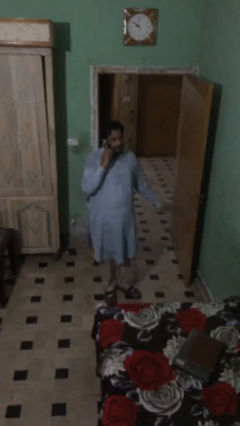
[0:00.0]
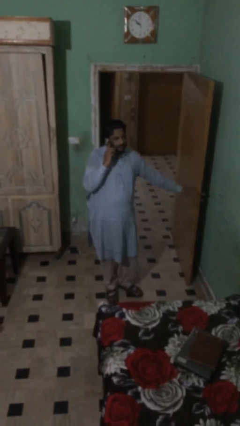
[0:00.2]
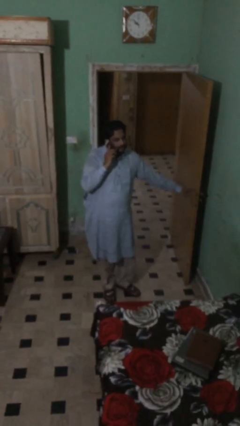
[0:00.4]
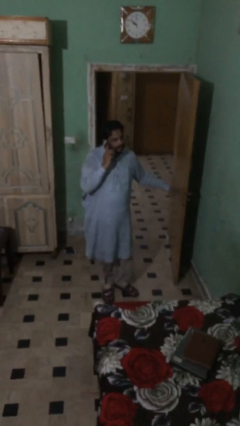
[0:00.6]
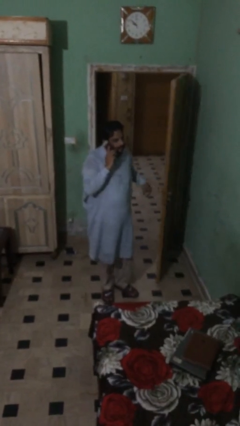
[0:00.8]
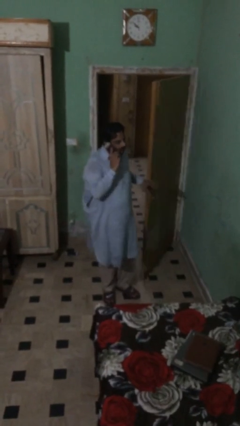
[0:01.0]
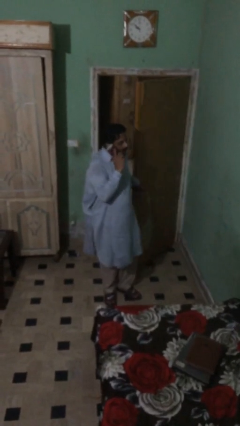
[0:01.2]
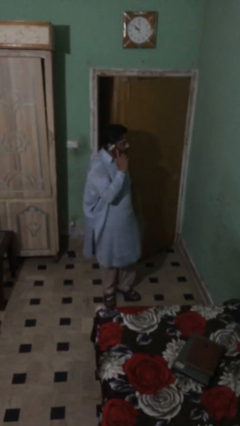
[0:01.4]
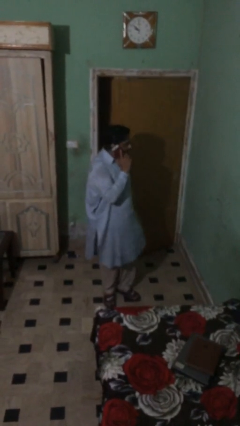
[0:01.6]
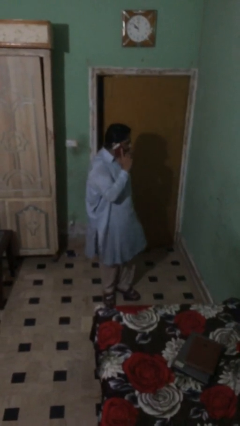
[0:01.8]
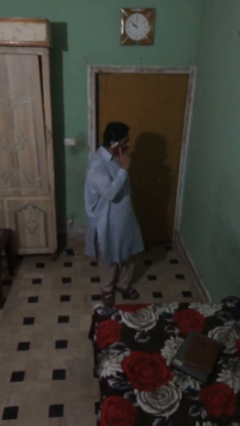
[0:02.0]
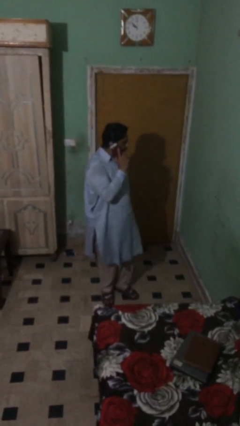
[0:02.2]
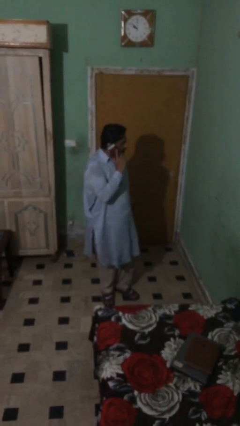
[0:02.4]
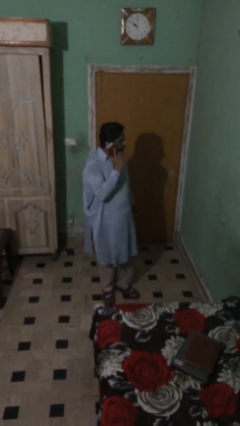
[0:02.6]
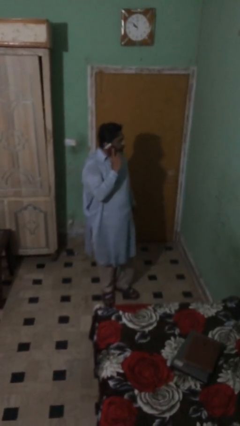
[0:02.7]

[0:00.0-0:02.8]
person closes facility door

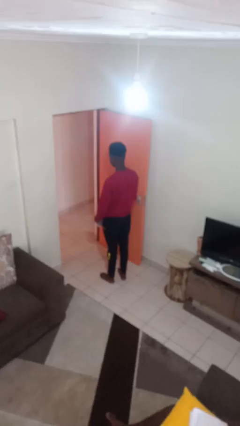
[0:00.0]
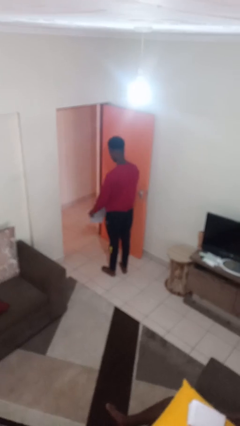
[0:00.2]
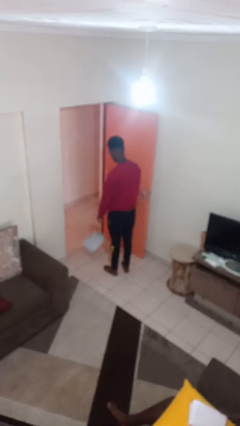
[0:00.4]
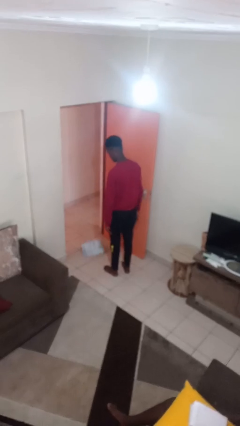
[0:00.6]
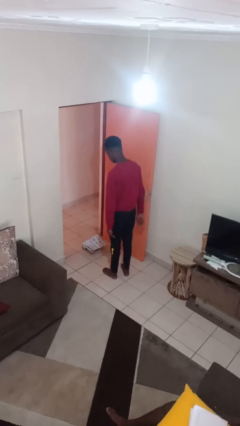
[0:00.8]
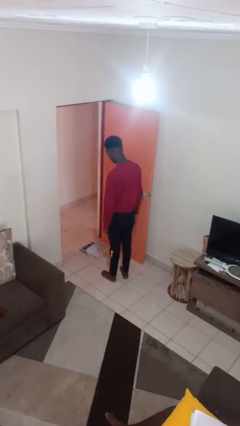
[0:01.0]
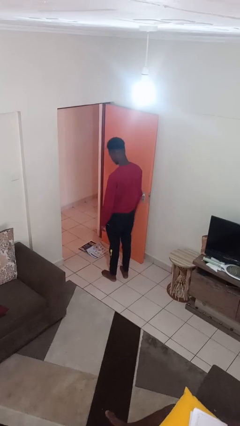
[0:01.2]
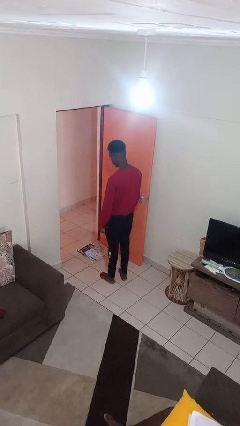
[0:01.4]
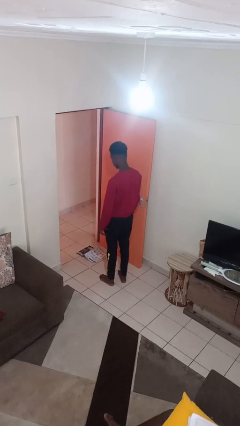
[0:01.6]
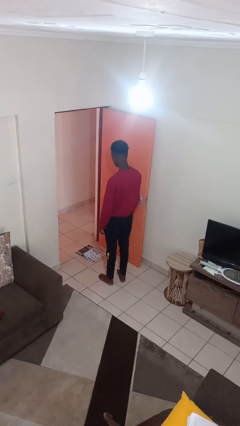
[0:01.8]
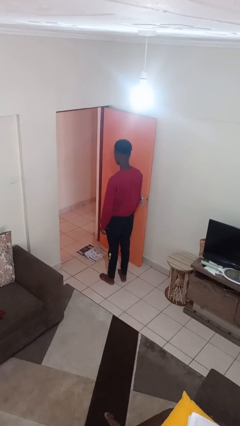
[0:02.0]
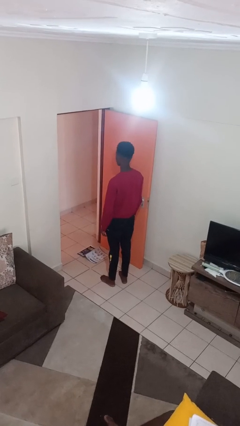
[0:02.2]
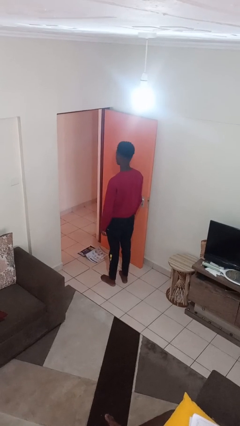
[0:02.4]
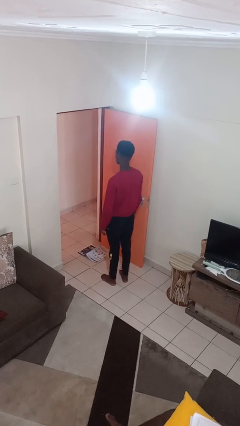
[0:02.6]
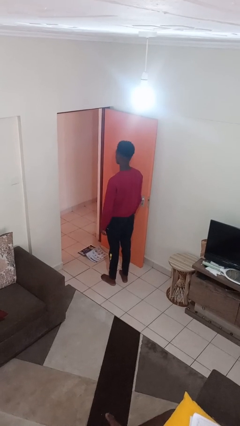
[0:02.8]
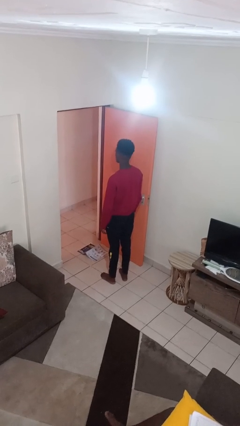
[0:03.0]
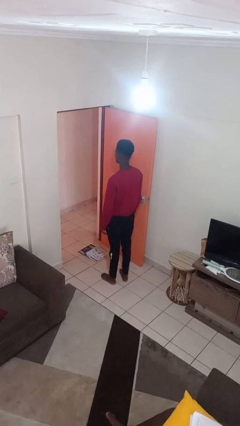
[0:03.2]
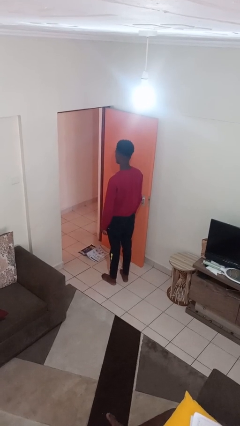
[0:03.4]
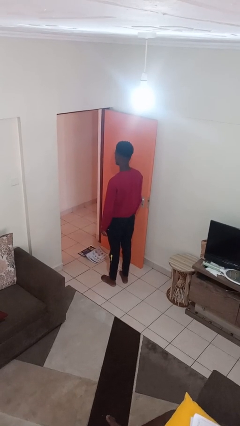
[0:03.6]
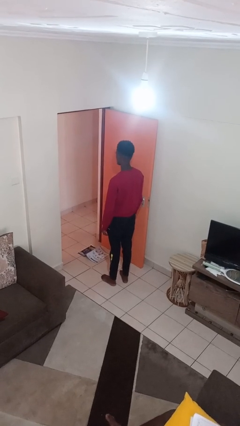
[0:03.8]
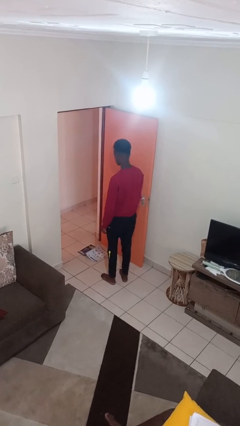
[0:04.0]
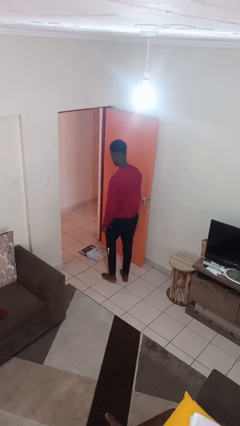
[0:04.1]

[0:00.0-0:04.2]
person drops object

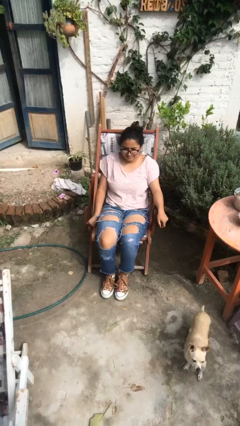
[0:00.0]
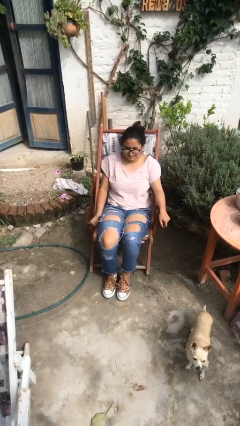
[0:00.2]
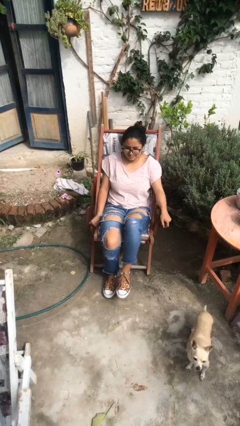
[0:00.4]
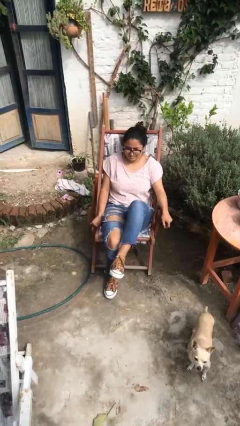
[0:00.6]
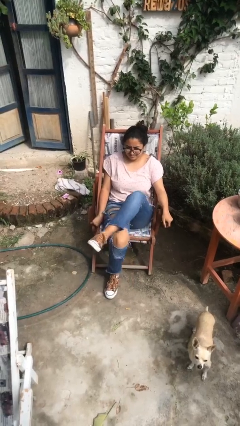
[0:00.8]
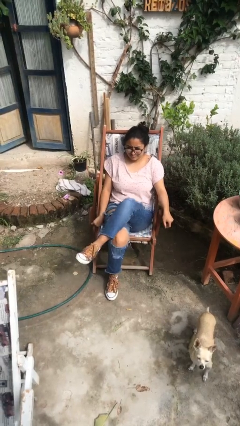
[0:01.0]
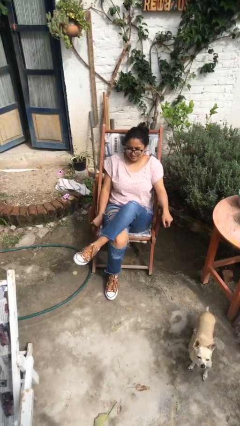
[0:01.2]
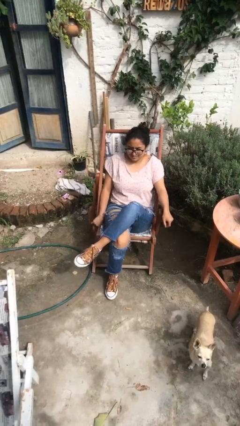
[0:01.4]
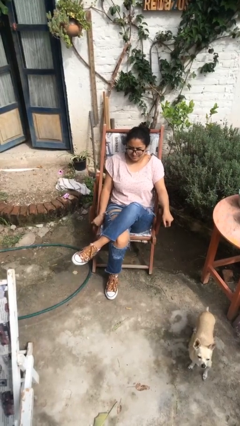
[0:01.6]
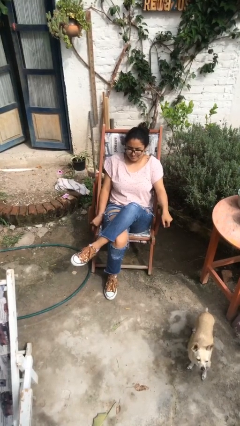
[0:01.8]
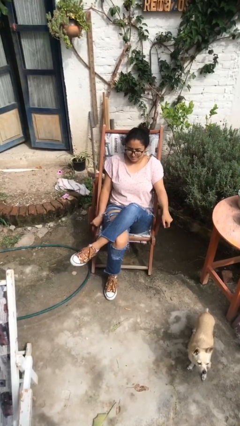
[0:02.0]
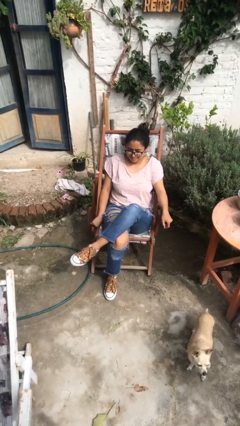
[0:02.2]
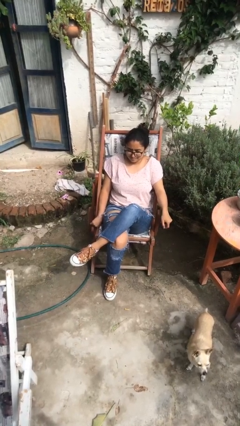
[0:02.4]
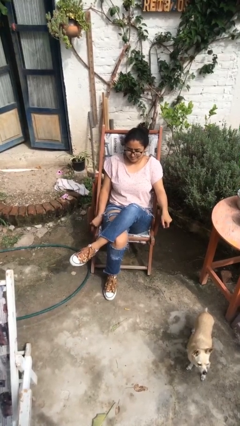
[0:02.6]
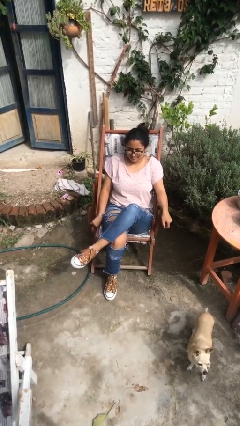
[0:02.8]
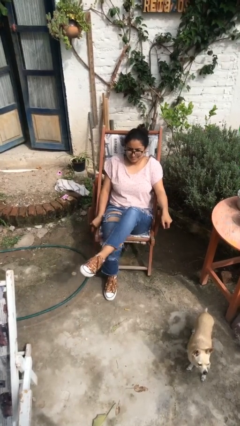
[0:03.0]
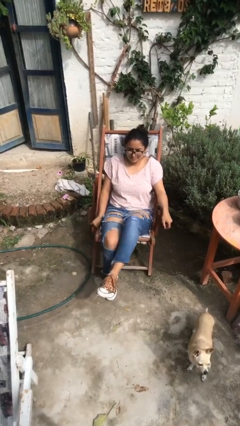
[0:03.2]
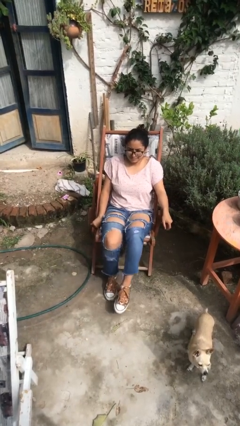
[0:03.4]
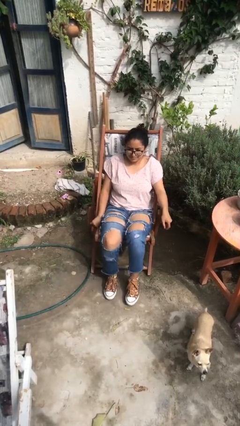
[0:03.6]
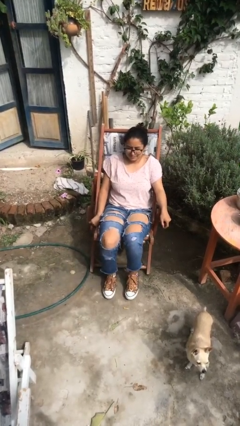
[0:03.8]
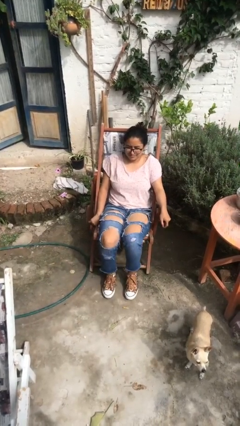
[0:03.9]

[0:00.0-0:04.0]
person crosses legs

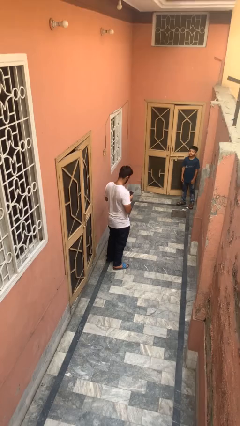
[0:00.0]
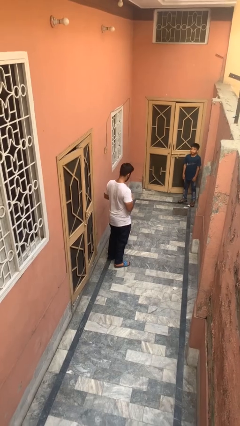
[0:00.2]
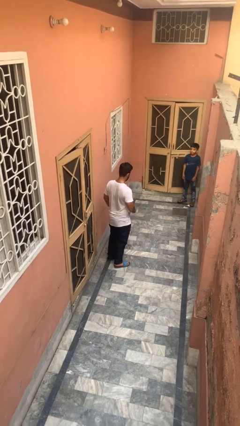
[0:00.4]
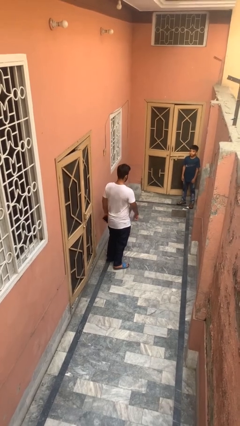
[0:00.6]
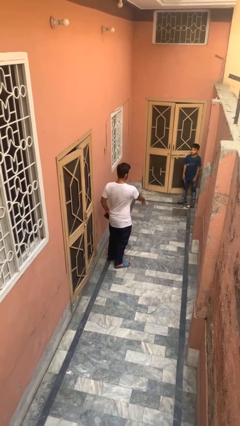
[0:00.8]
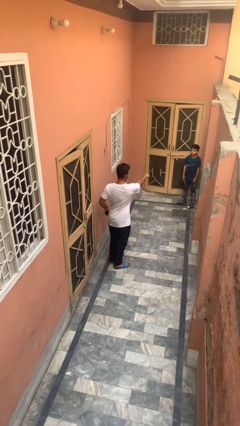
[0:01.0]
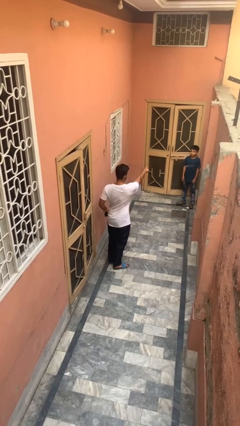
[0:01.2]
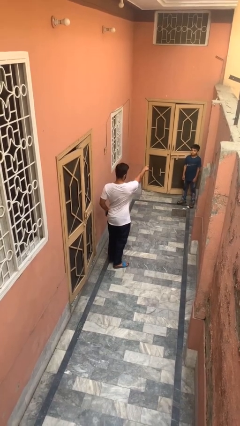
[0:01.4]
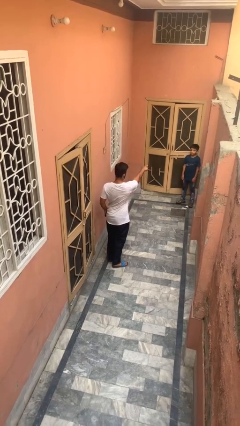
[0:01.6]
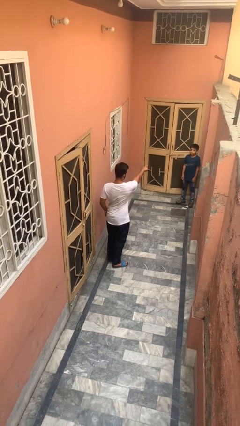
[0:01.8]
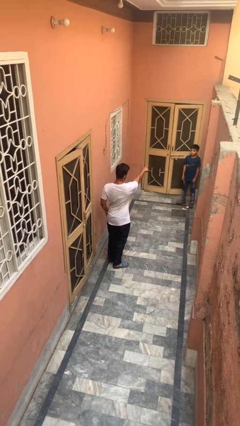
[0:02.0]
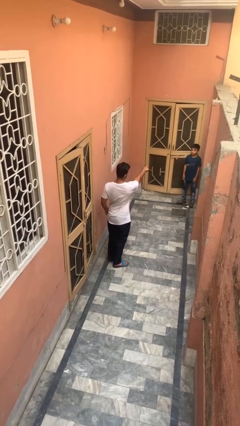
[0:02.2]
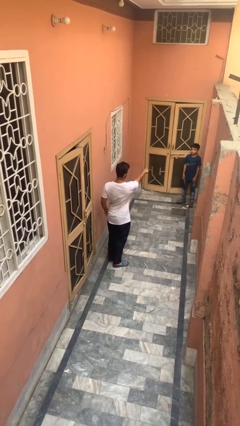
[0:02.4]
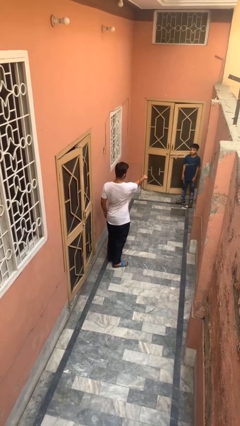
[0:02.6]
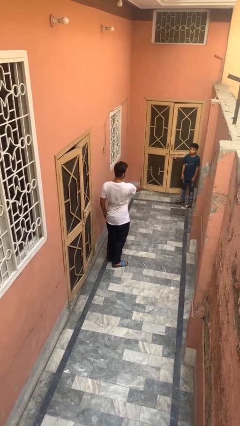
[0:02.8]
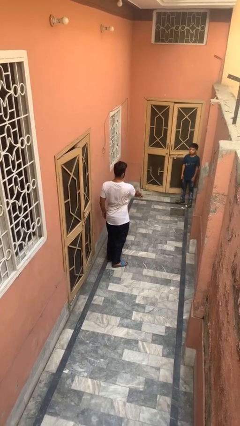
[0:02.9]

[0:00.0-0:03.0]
person points at person

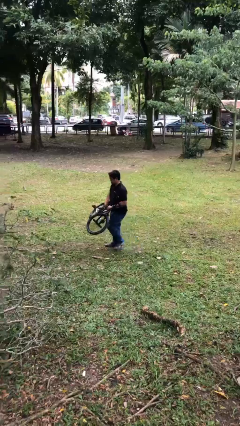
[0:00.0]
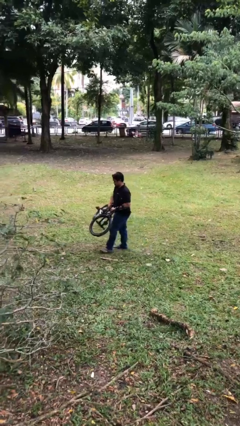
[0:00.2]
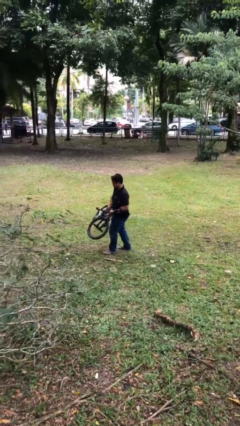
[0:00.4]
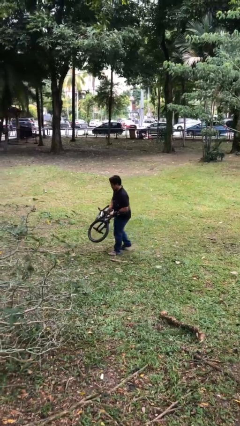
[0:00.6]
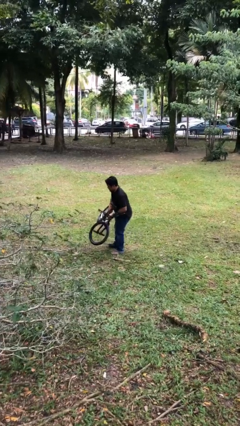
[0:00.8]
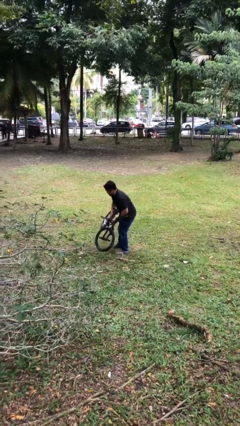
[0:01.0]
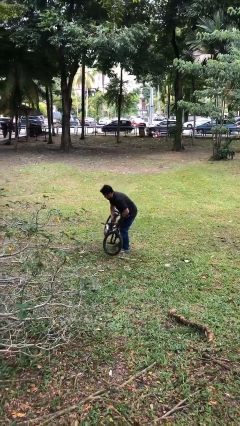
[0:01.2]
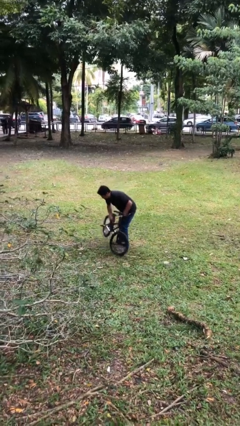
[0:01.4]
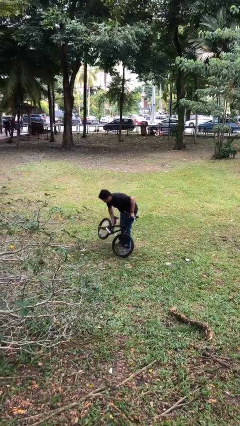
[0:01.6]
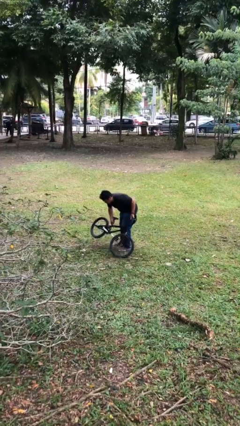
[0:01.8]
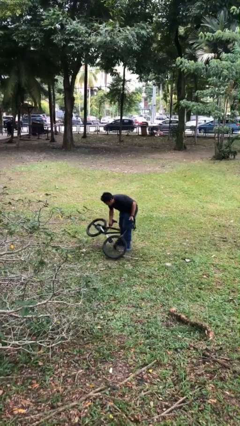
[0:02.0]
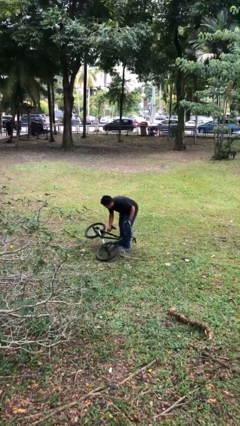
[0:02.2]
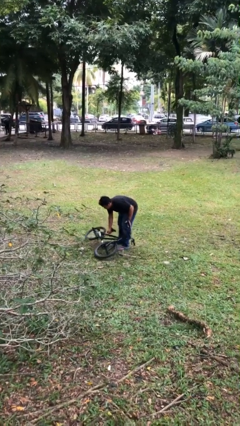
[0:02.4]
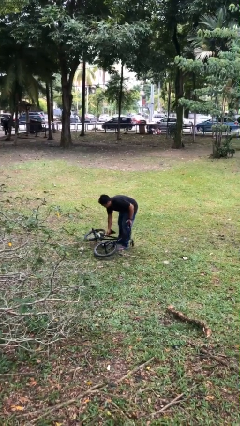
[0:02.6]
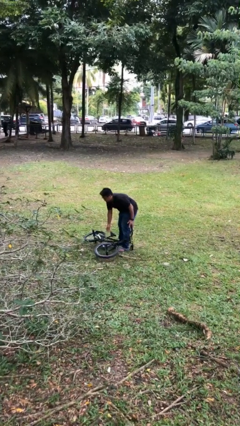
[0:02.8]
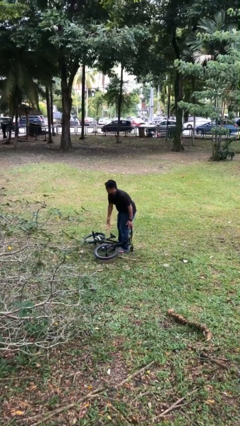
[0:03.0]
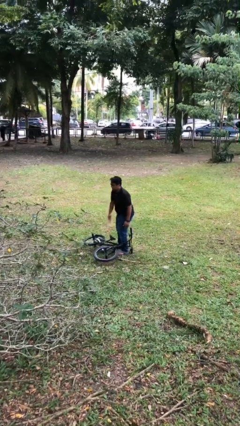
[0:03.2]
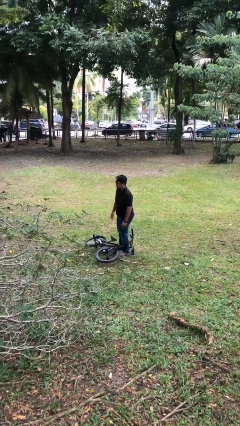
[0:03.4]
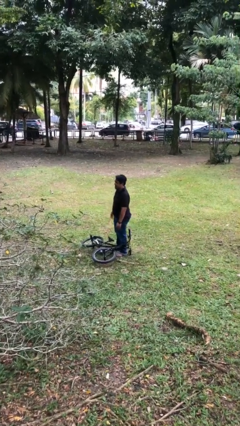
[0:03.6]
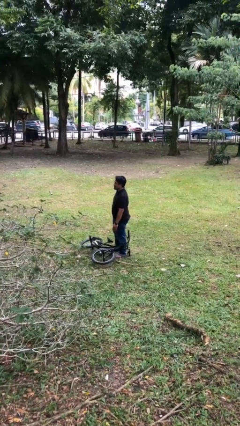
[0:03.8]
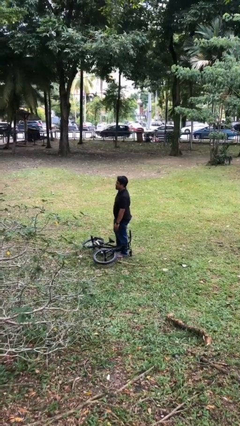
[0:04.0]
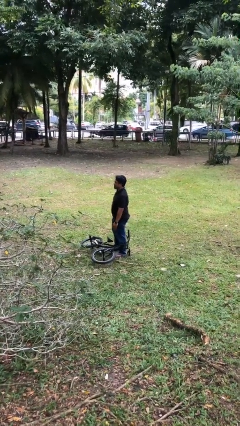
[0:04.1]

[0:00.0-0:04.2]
person puts down object on floor
